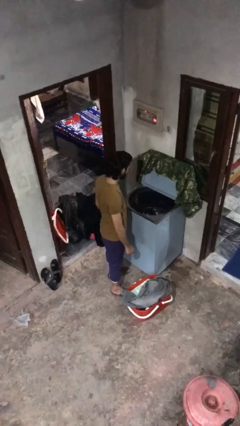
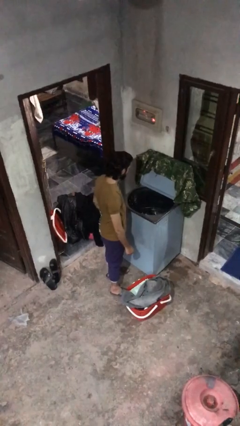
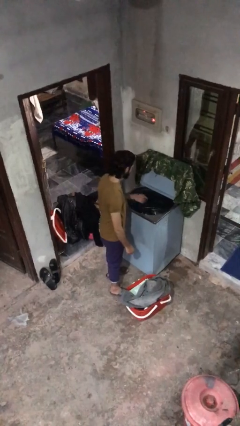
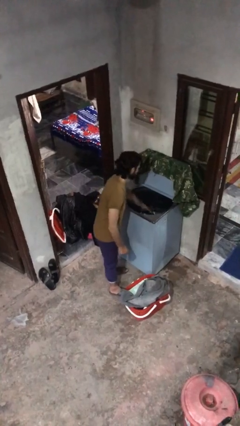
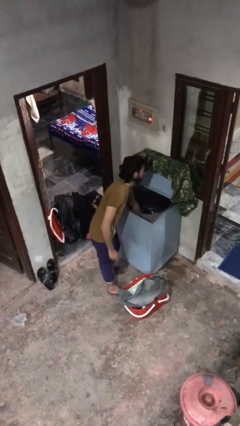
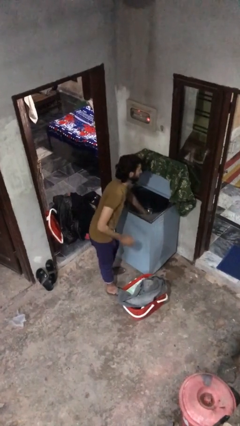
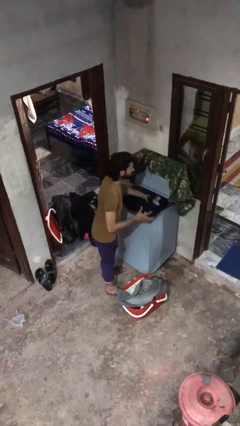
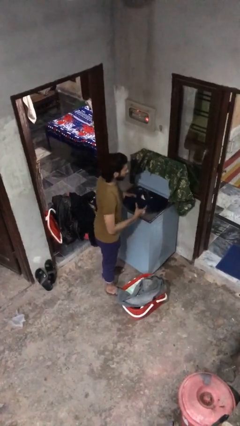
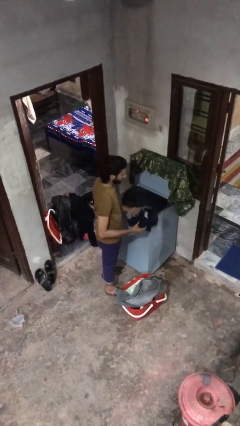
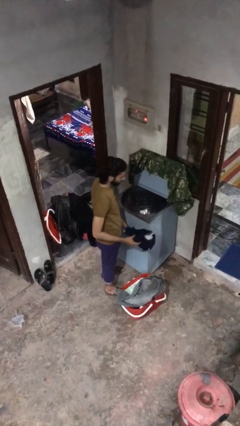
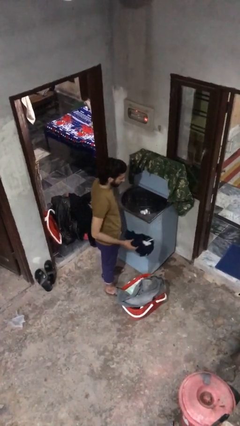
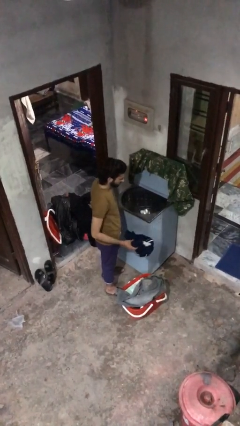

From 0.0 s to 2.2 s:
person loads clotheswasher

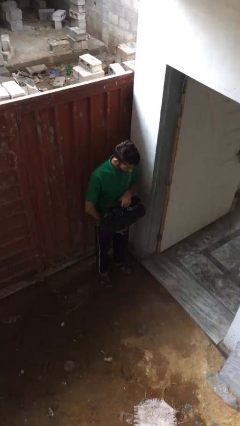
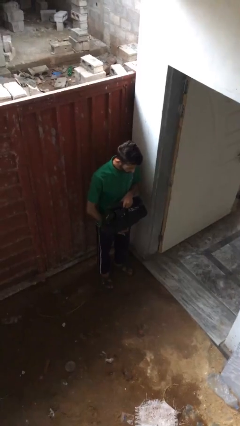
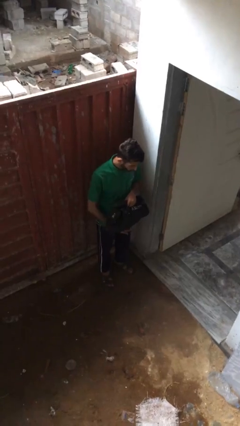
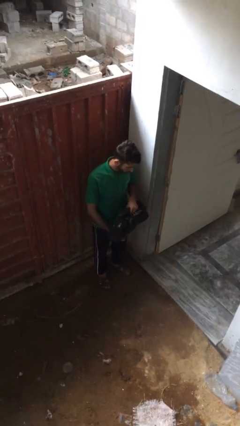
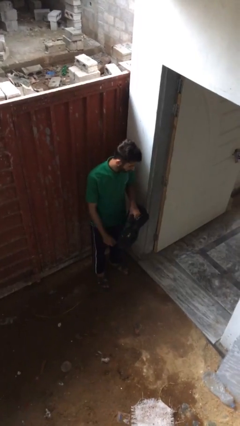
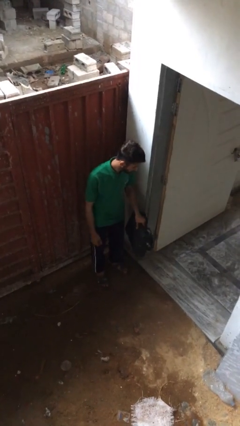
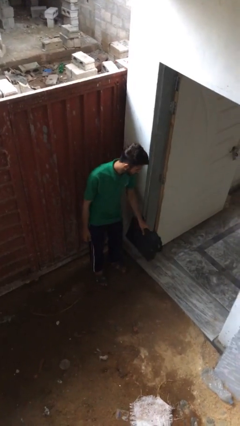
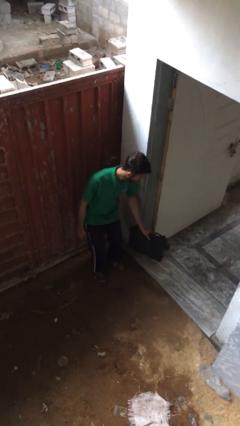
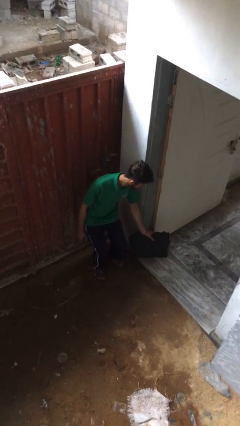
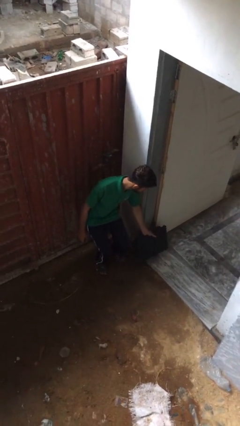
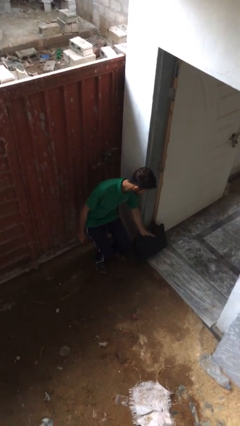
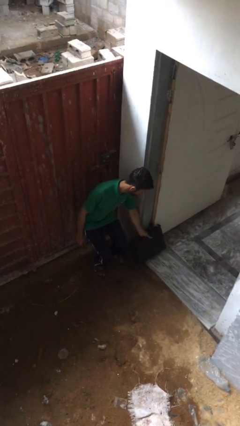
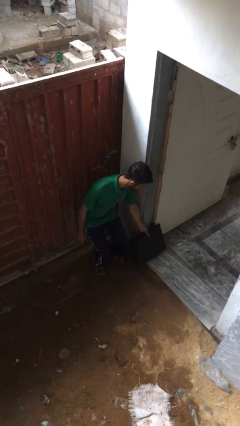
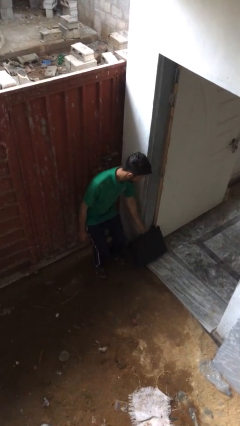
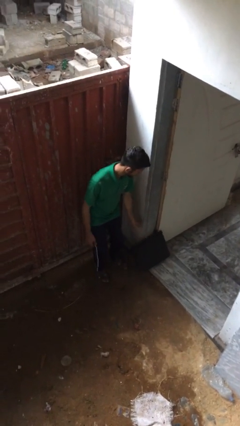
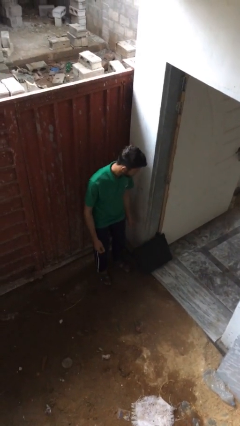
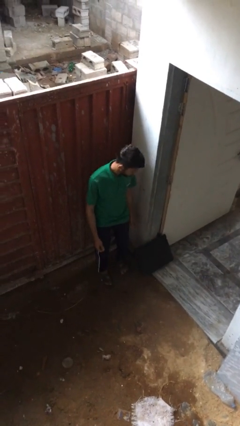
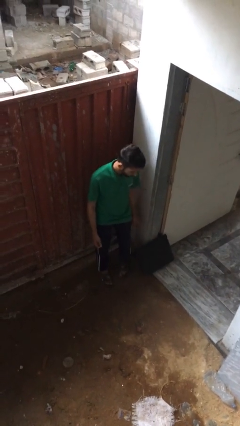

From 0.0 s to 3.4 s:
person puts down object on floor

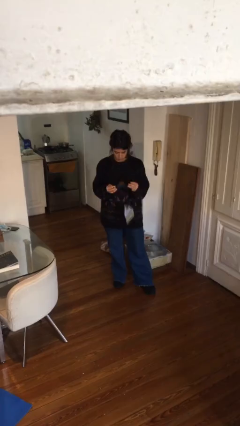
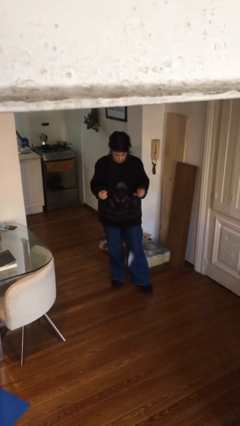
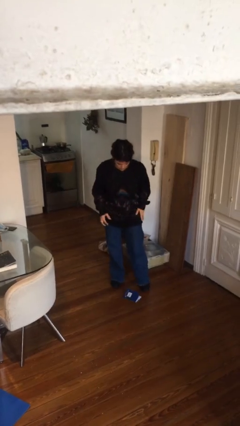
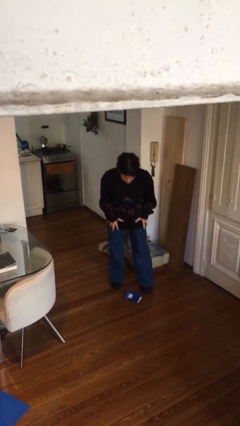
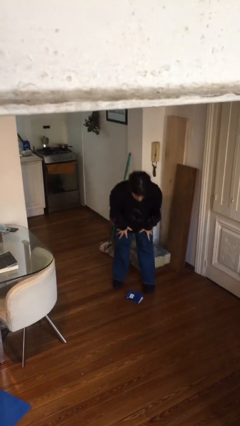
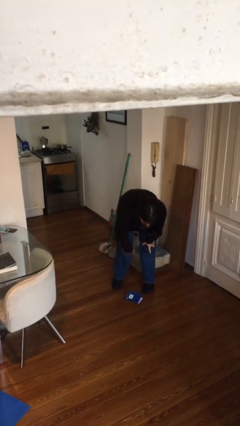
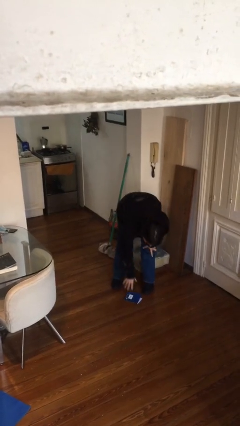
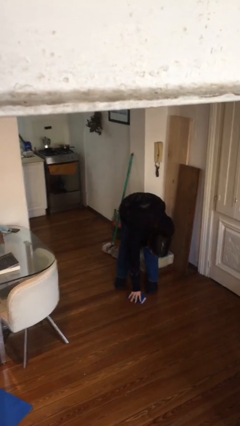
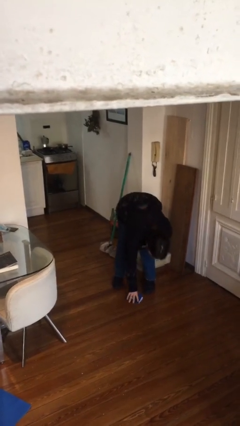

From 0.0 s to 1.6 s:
person drops object

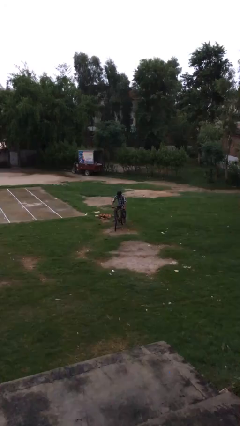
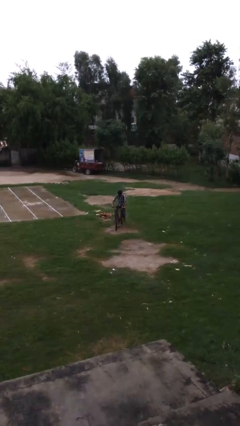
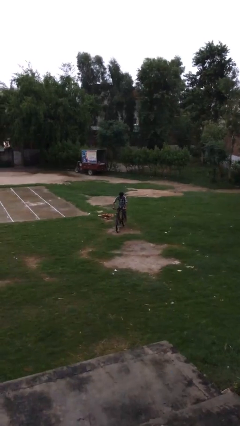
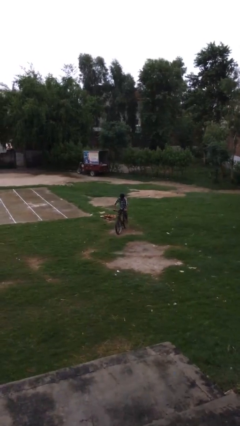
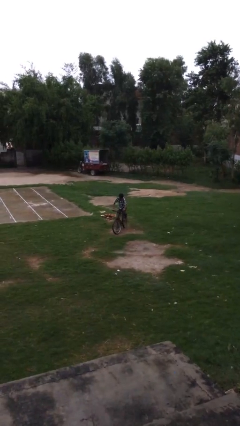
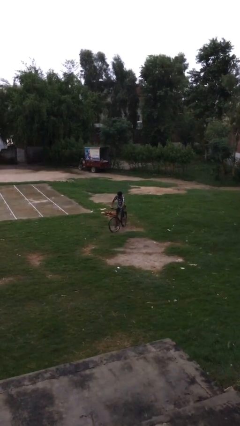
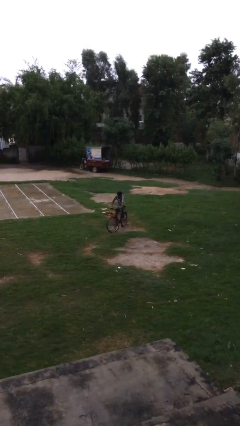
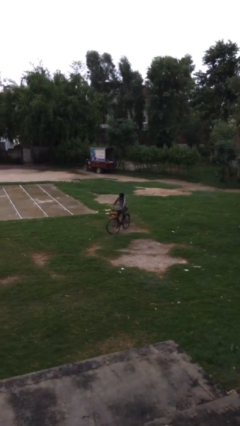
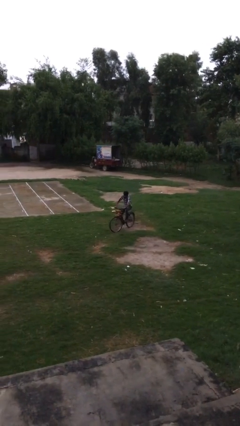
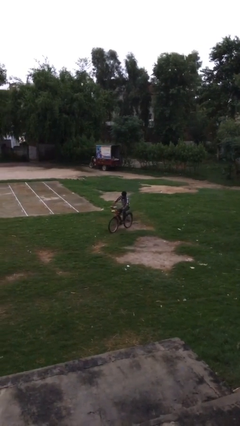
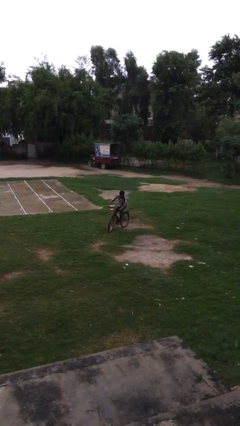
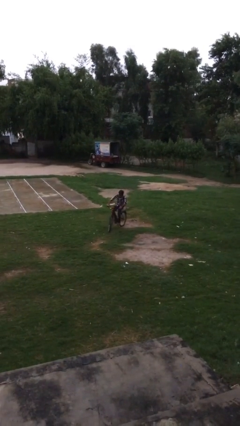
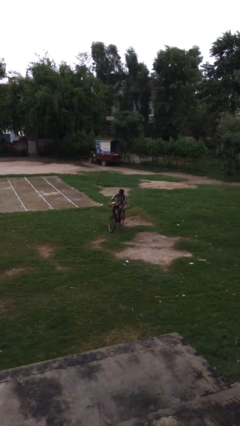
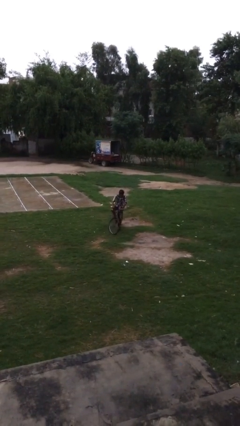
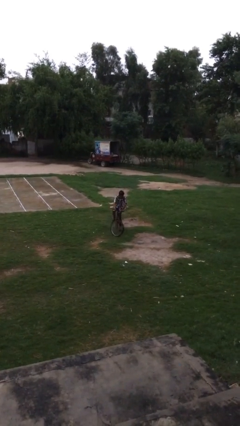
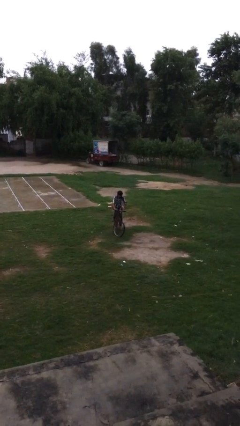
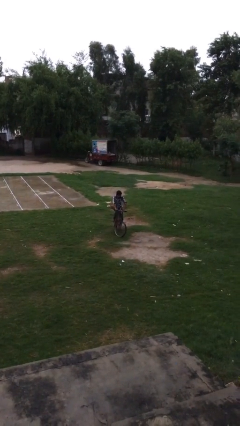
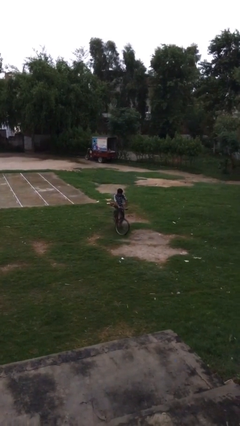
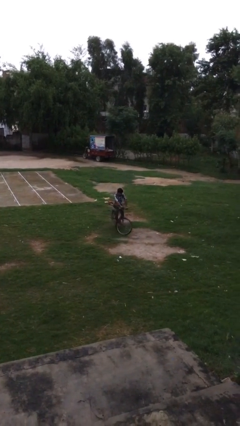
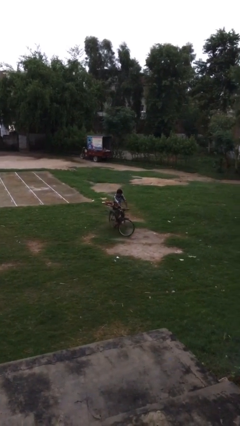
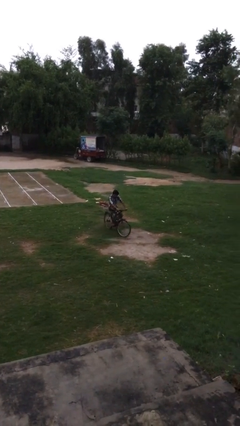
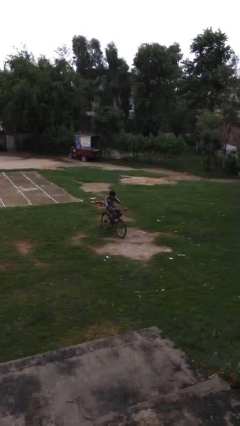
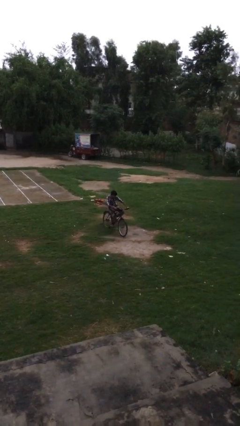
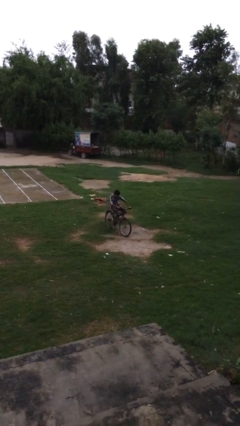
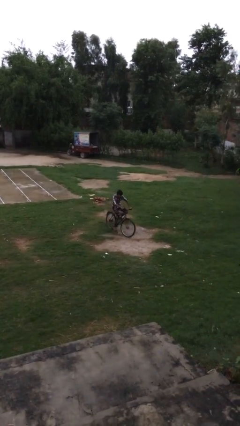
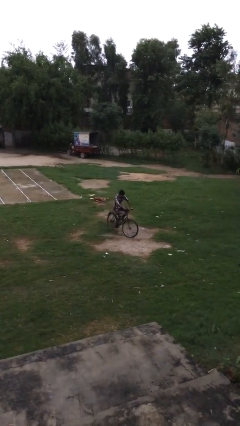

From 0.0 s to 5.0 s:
person rides bicycle

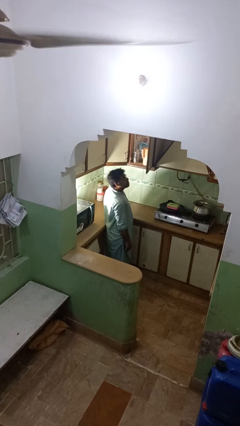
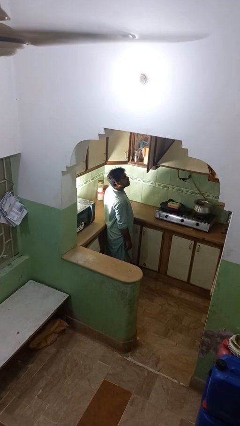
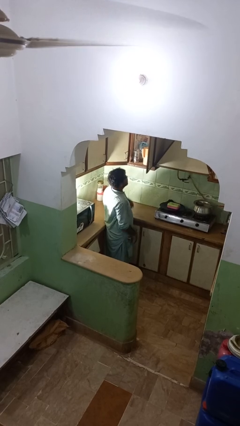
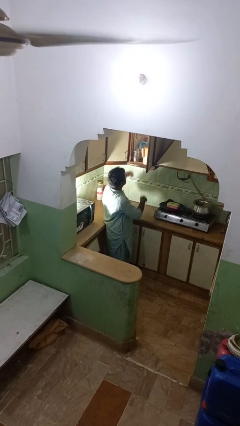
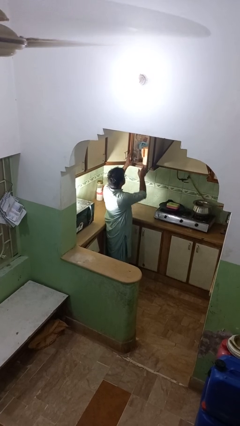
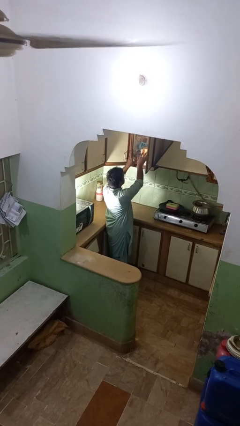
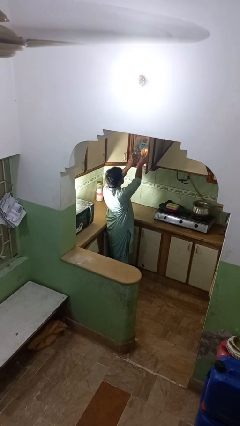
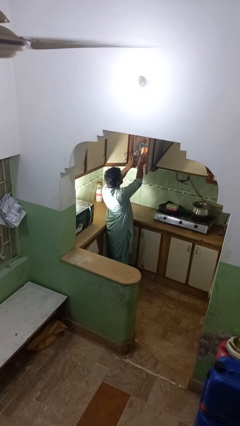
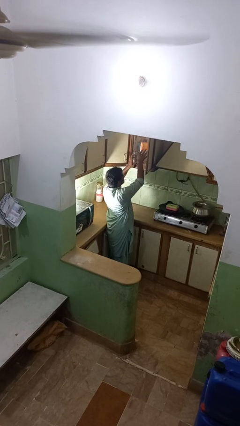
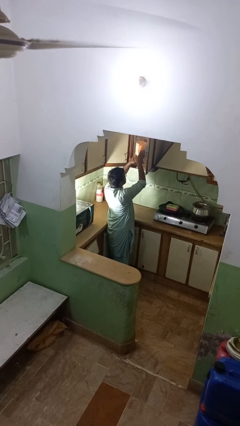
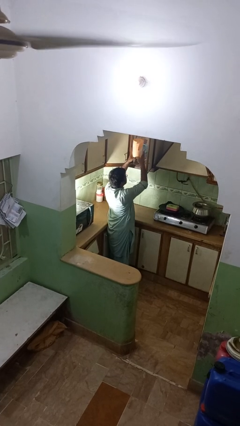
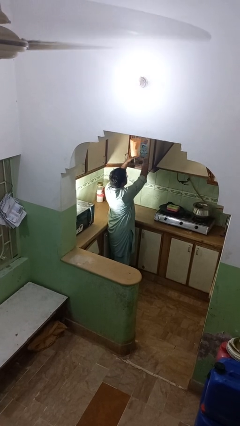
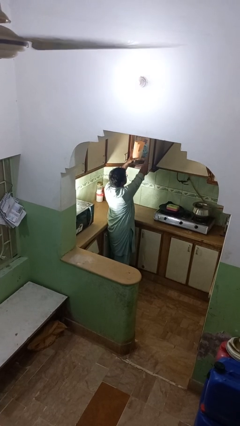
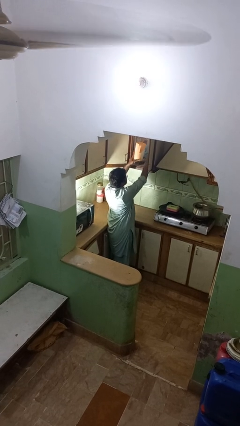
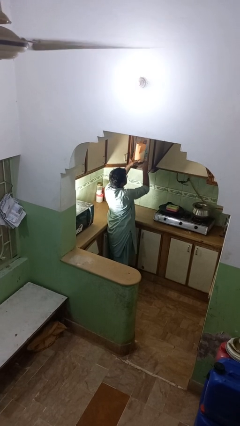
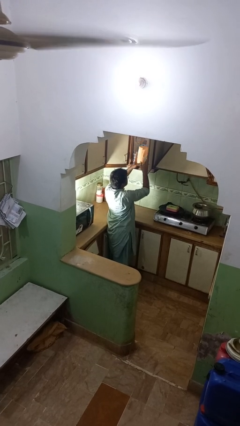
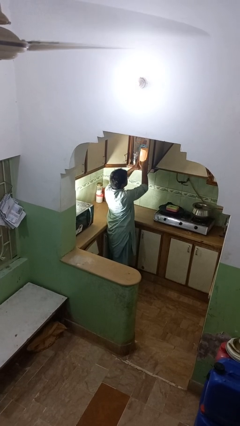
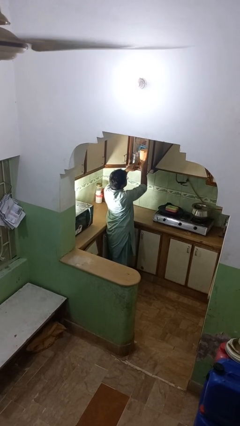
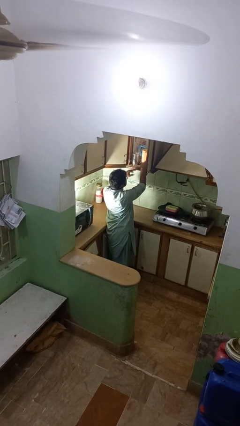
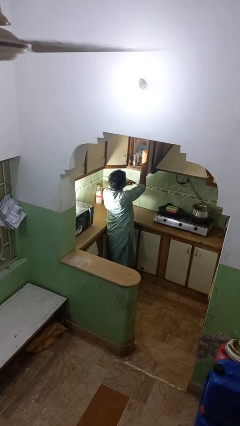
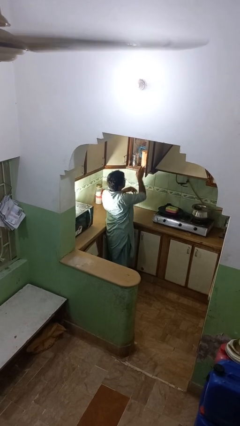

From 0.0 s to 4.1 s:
person searches in kitchen drawer

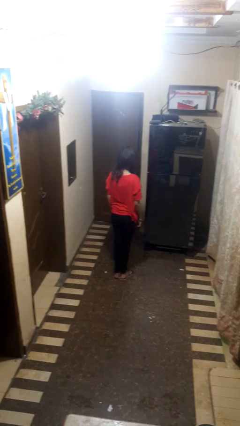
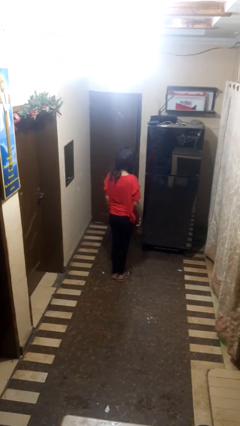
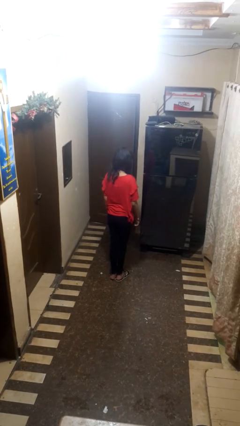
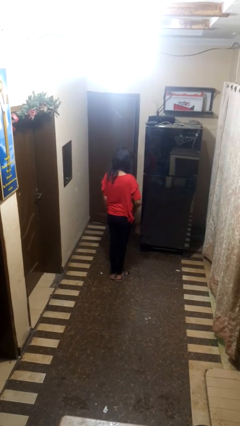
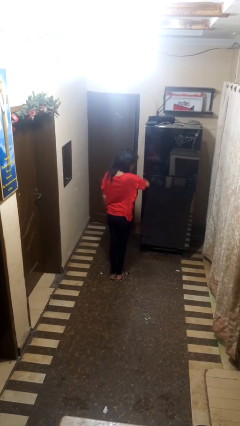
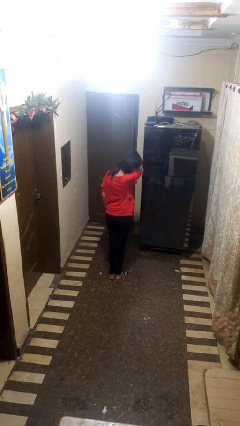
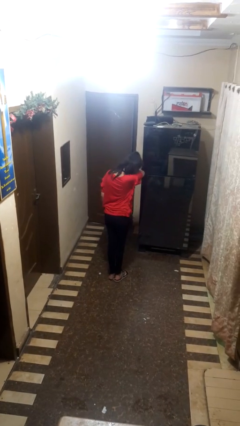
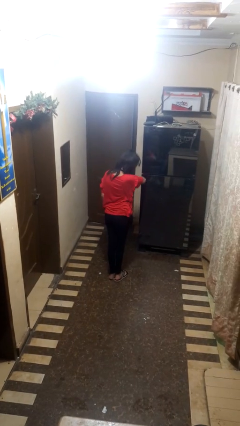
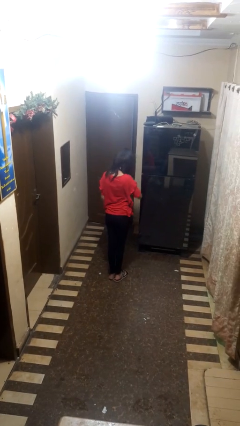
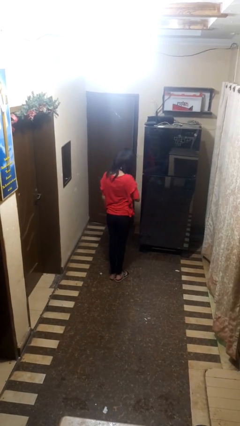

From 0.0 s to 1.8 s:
person sneezes into arm
